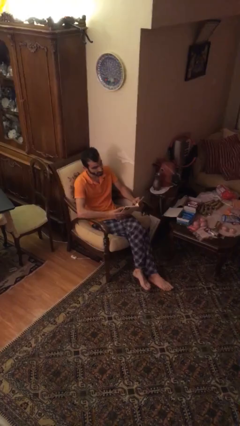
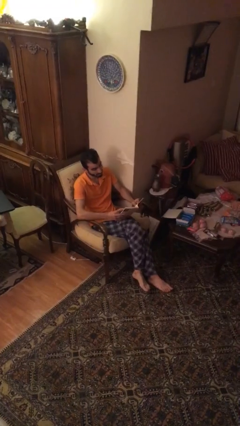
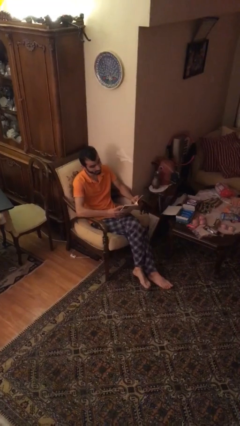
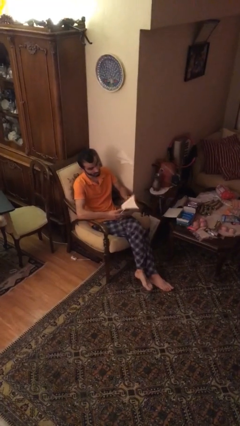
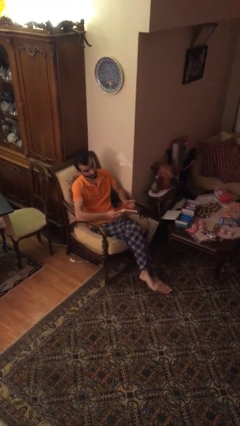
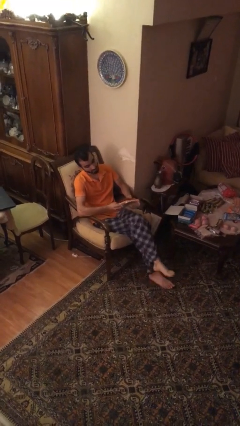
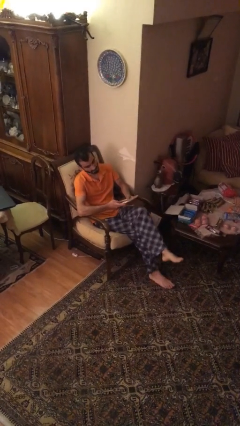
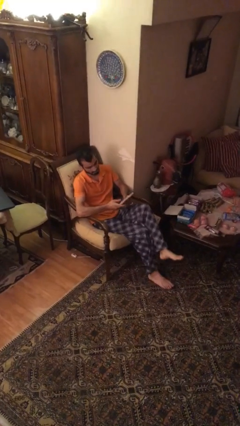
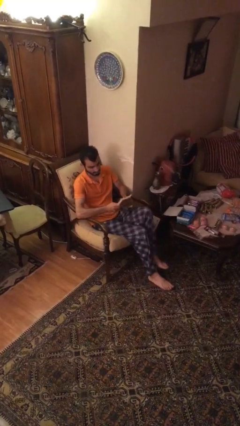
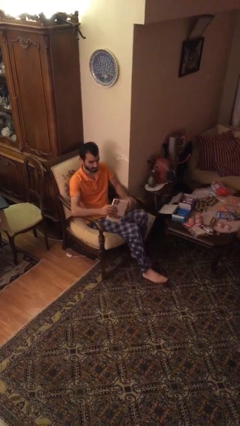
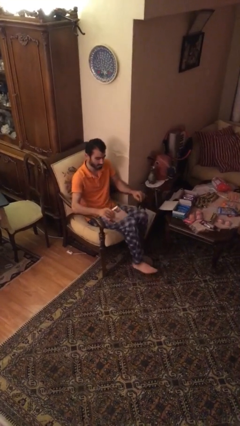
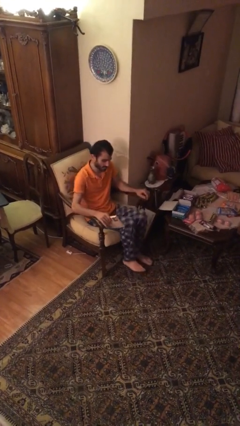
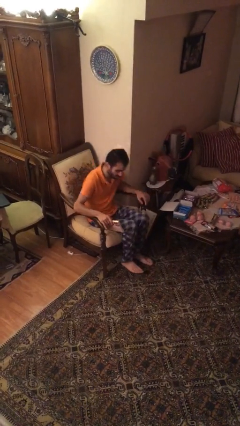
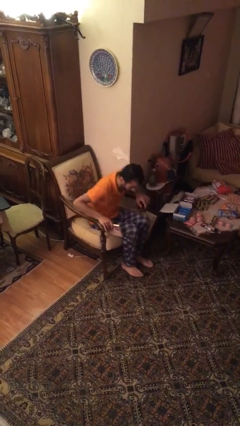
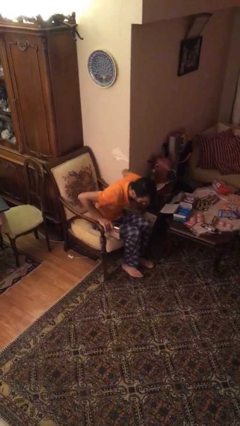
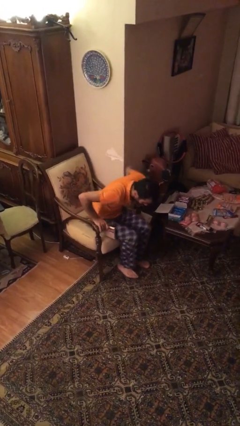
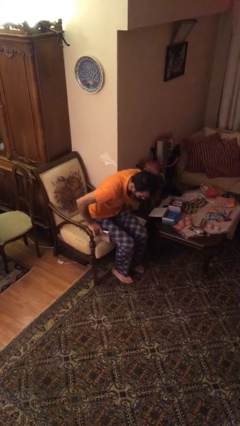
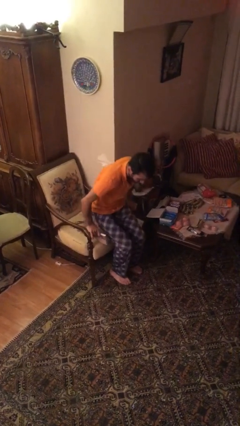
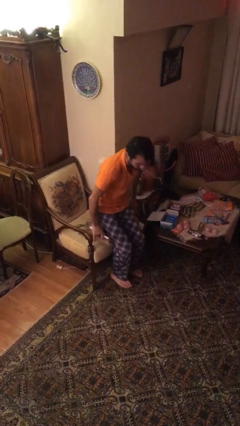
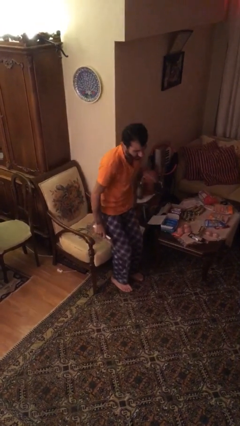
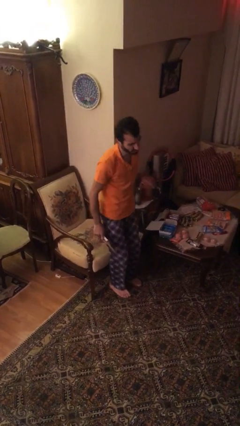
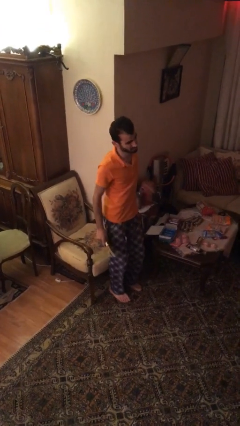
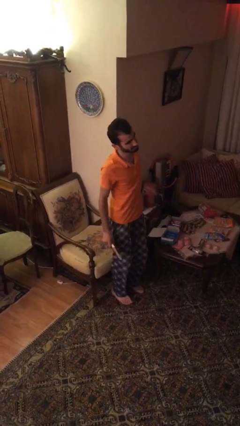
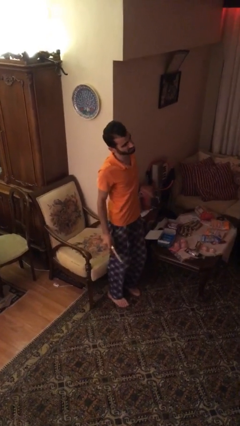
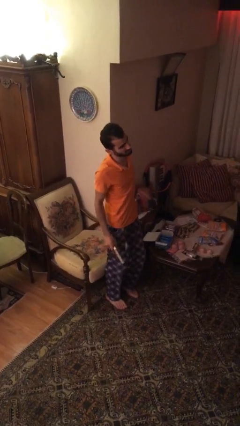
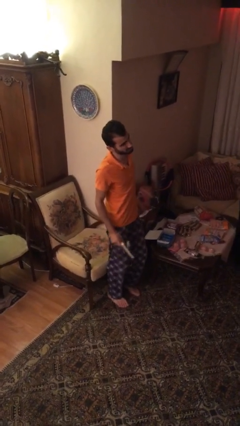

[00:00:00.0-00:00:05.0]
person stands up

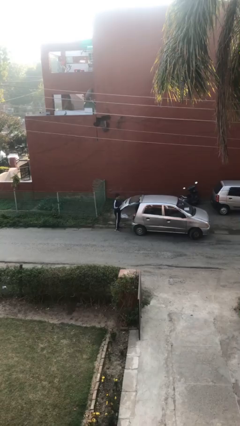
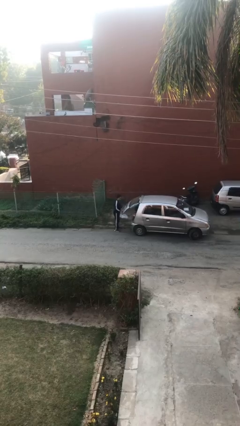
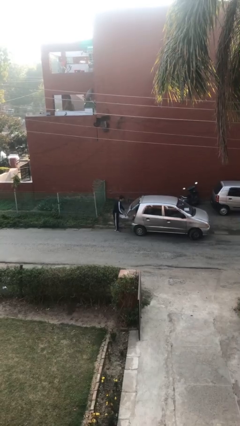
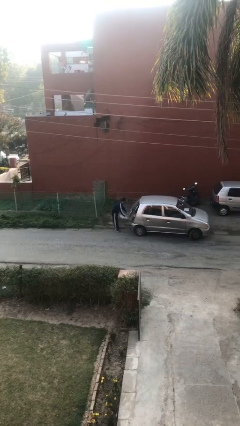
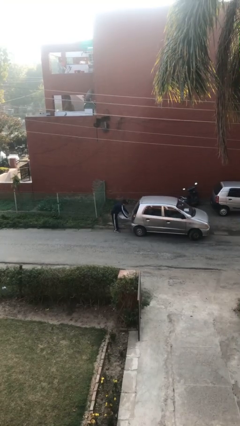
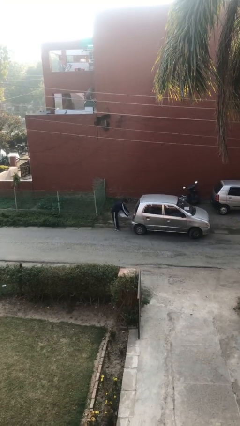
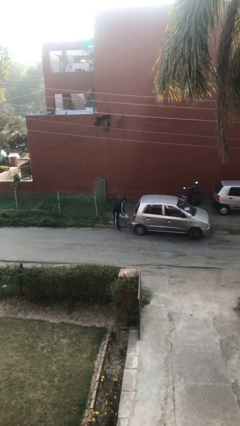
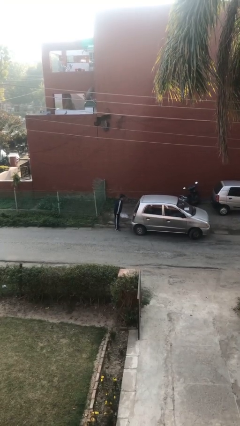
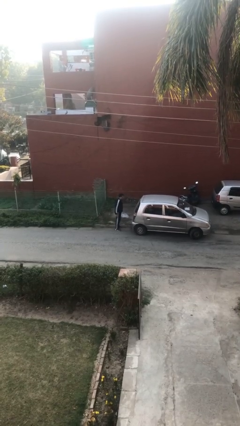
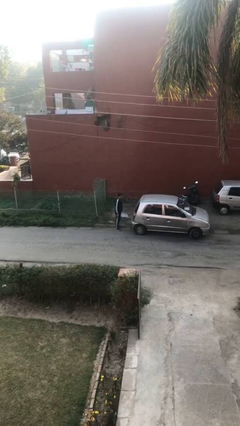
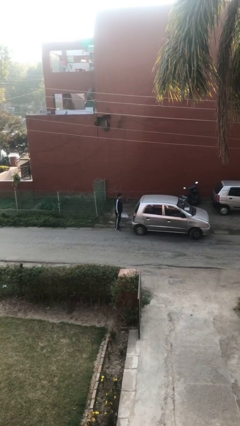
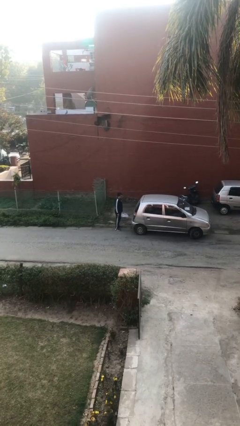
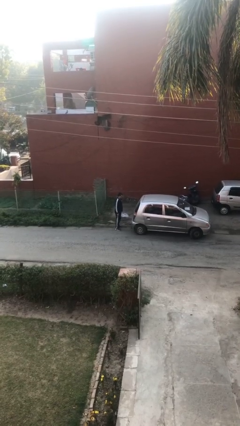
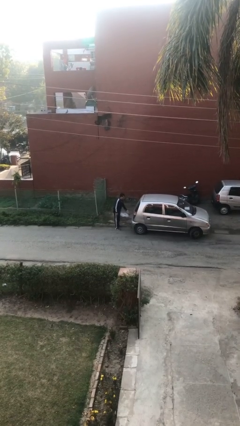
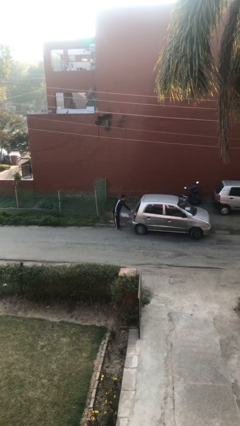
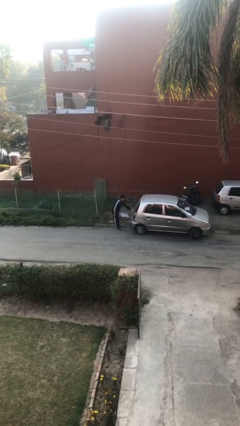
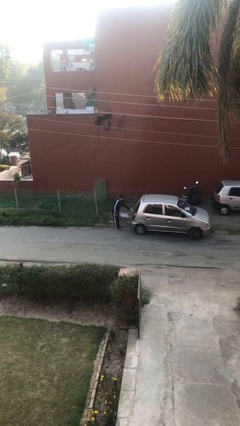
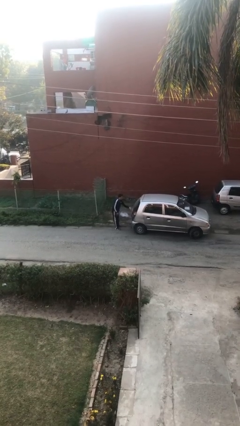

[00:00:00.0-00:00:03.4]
person closes car trunk

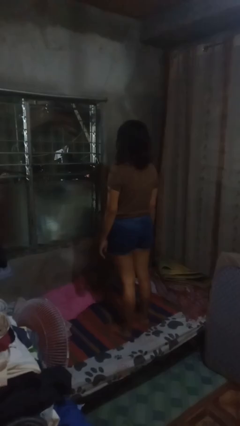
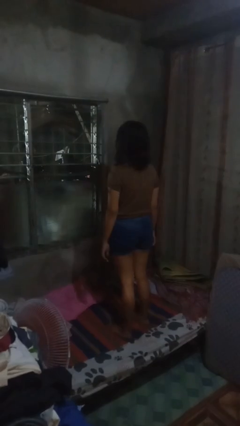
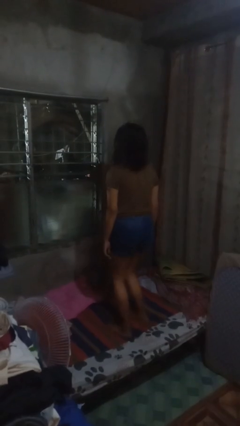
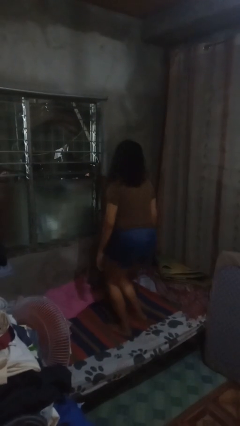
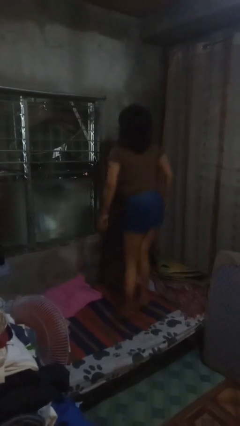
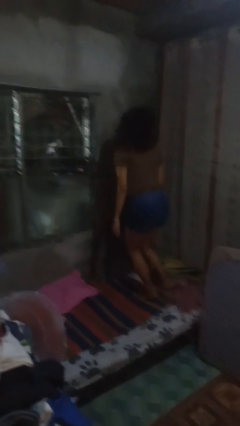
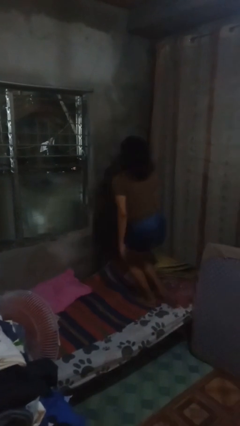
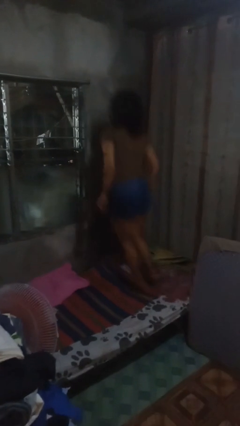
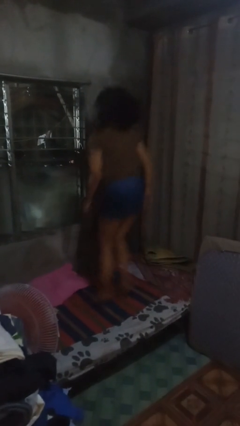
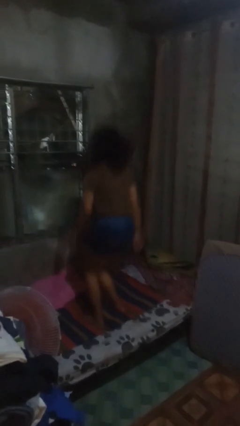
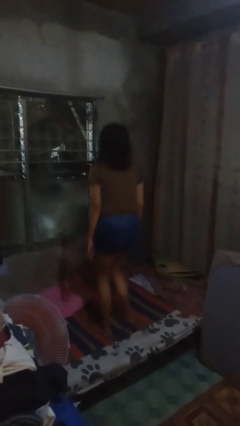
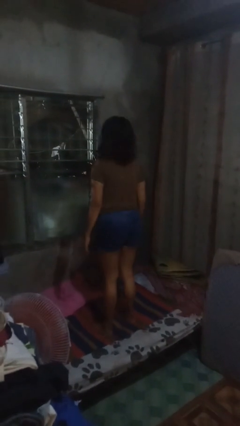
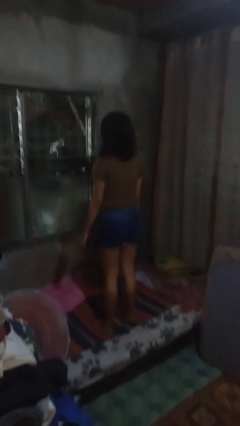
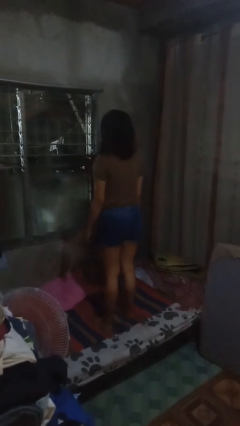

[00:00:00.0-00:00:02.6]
person jumps on bed

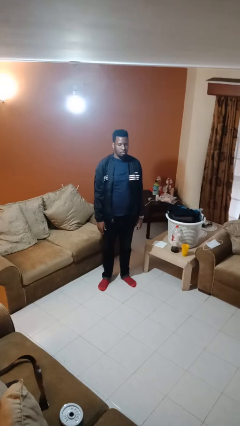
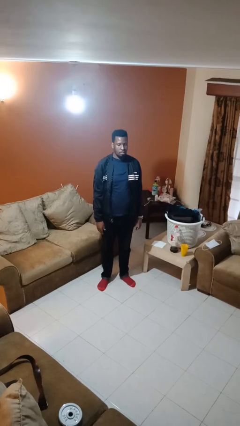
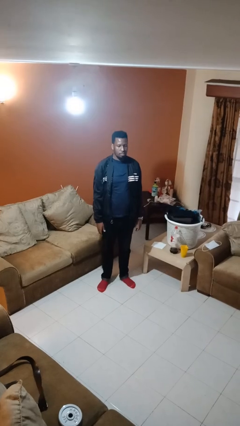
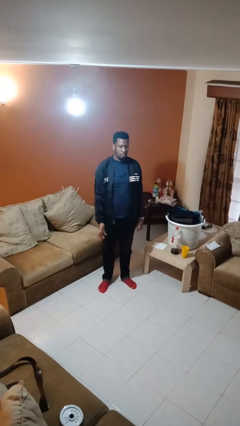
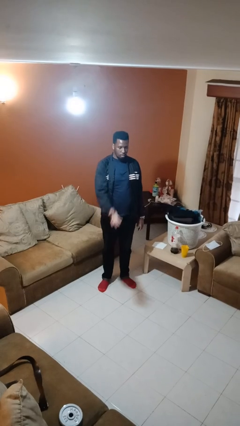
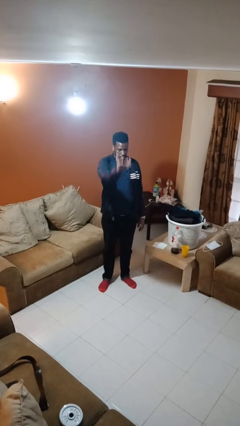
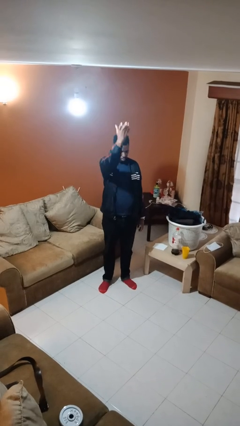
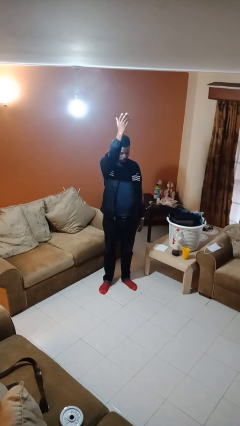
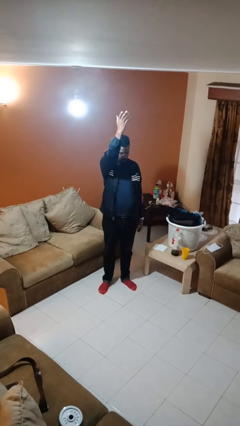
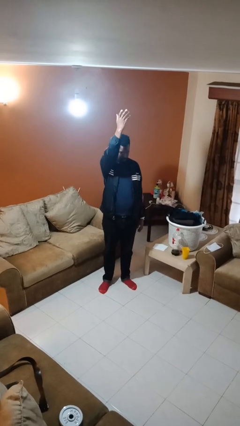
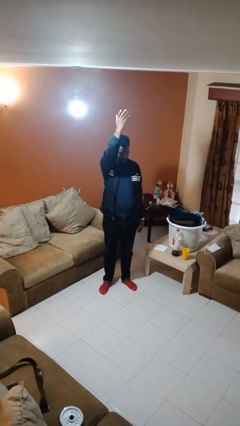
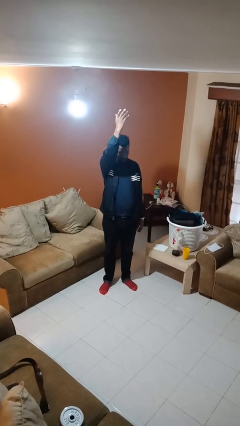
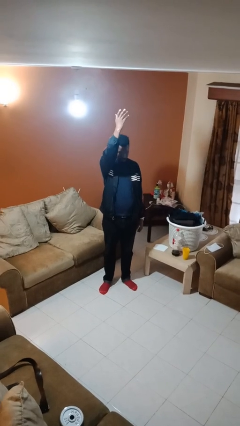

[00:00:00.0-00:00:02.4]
person gestures swipe up

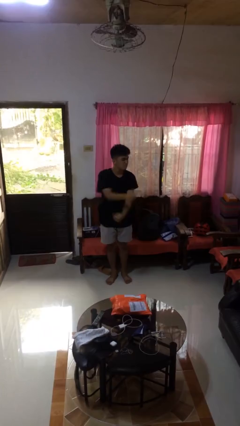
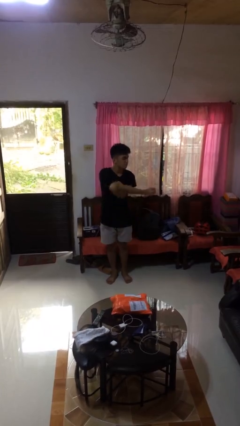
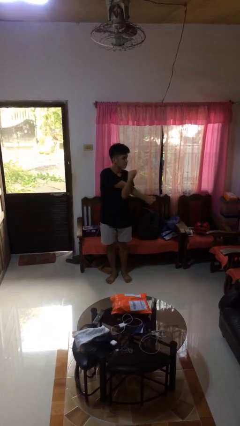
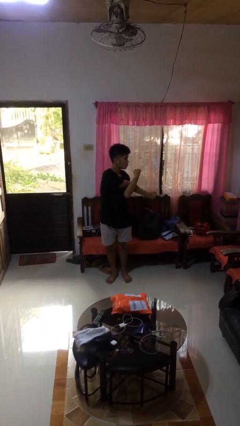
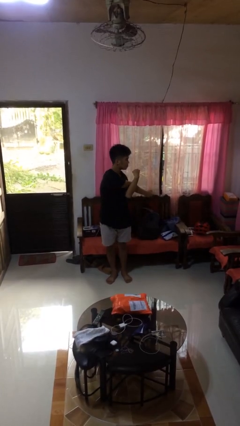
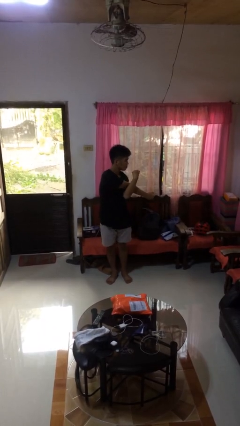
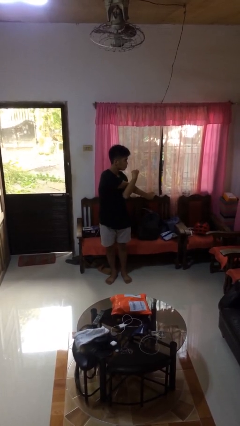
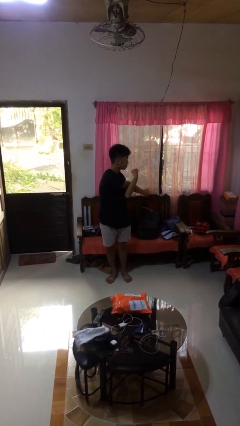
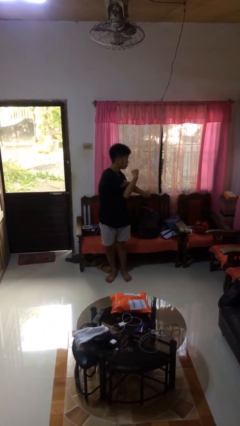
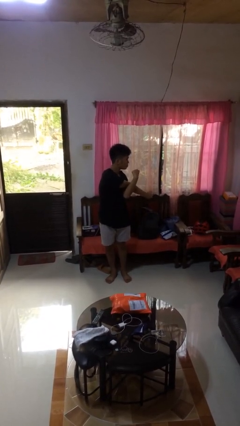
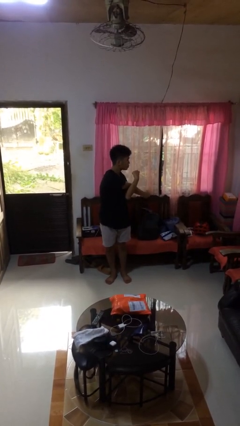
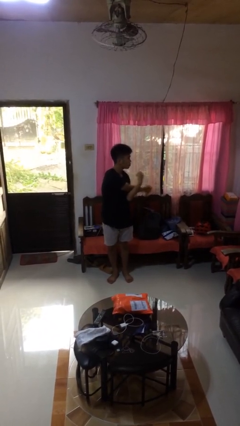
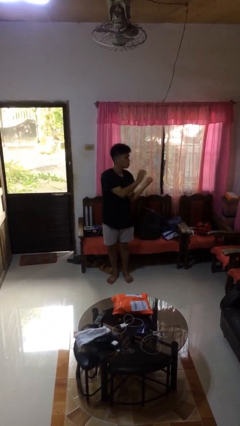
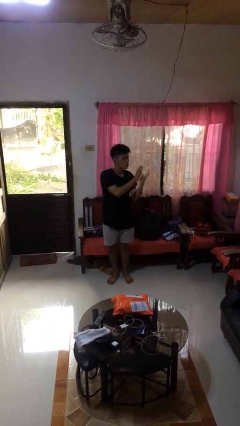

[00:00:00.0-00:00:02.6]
person stretches arms to side

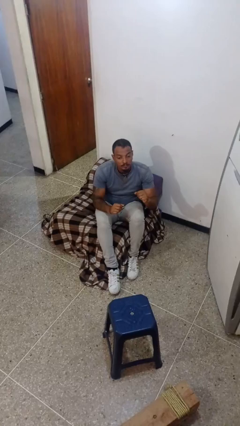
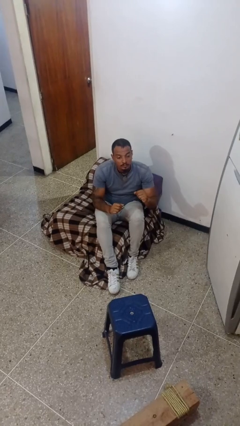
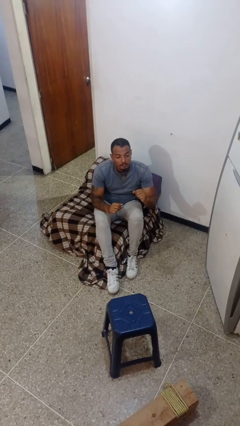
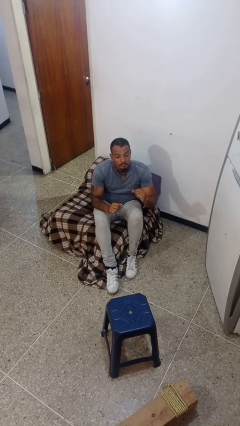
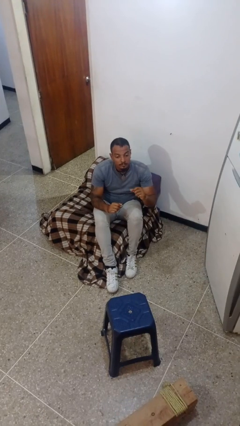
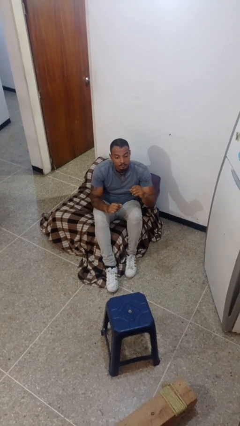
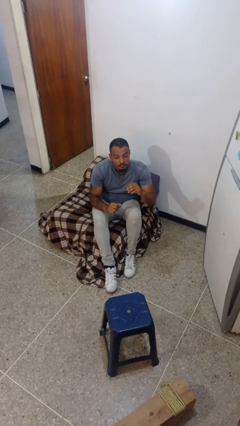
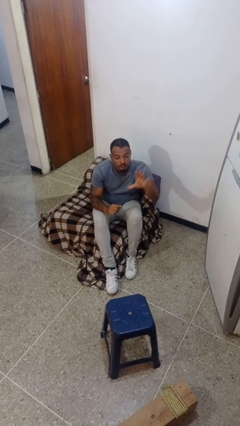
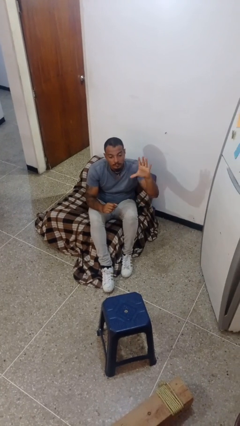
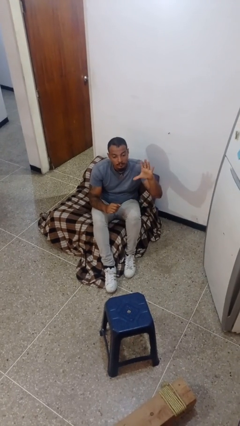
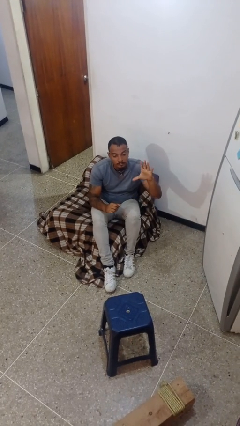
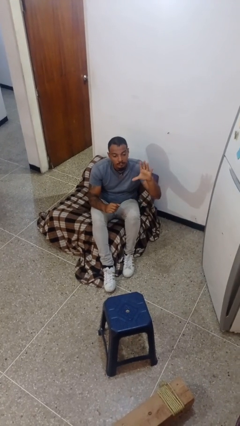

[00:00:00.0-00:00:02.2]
person gestures zoom in
